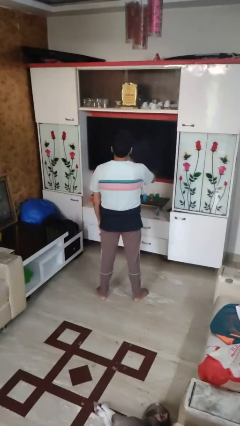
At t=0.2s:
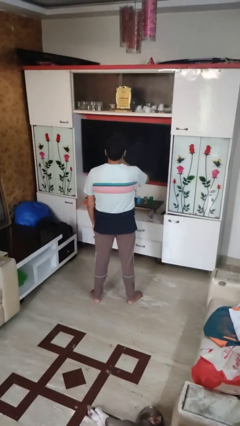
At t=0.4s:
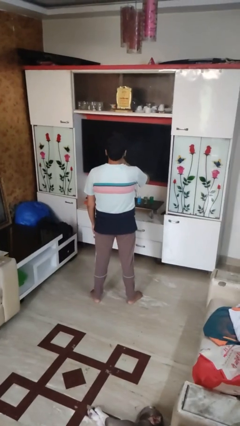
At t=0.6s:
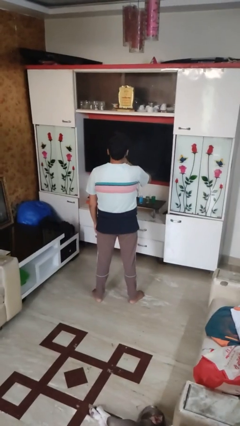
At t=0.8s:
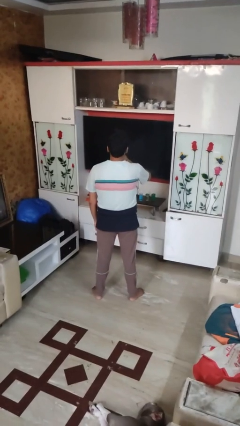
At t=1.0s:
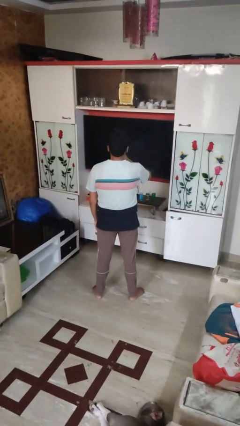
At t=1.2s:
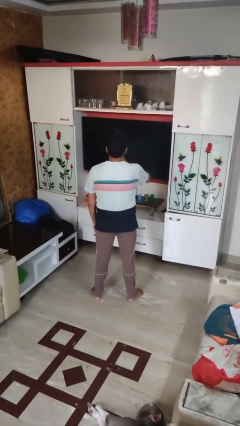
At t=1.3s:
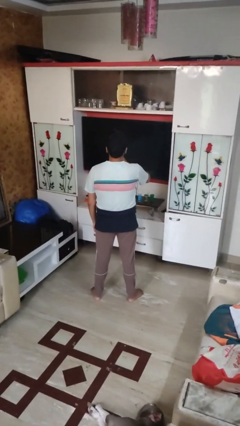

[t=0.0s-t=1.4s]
person gestures be quiet

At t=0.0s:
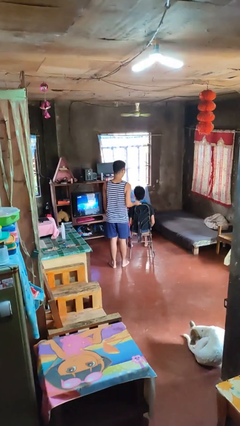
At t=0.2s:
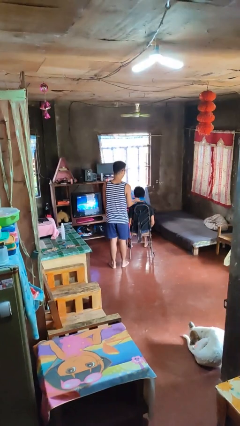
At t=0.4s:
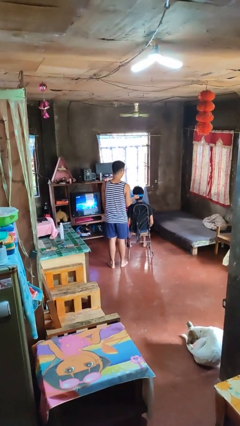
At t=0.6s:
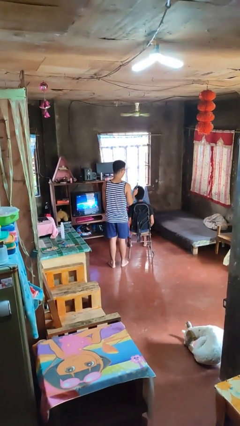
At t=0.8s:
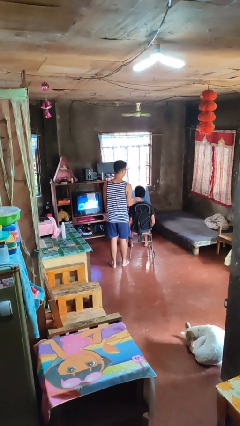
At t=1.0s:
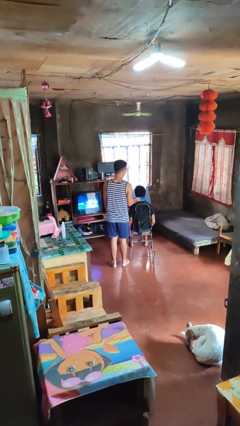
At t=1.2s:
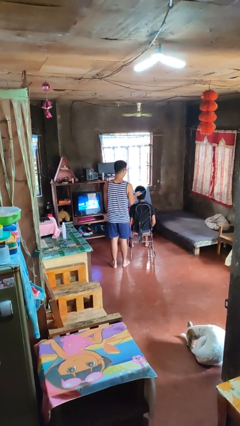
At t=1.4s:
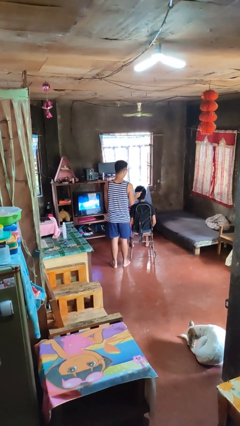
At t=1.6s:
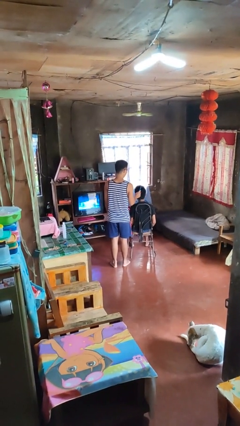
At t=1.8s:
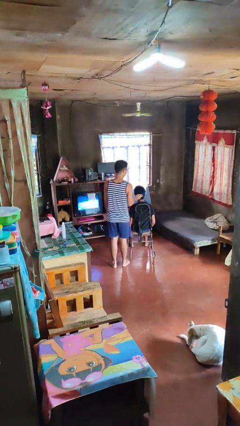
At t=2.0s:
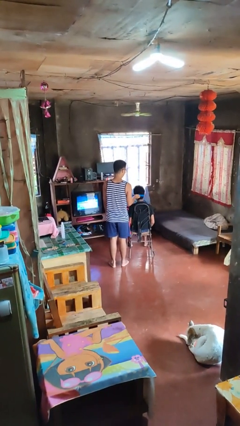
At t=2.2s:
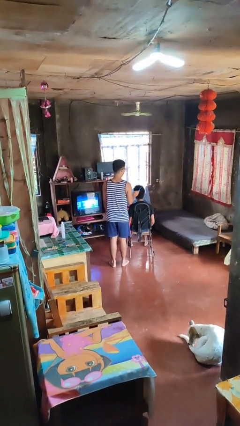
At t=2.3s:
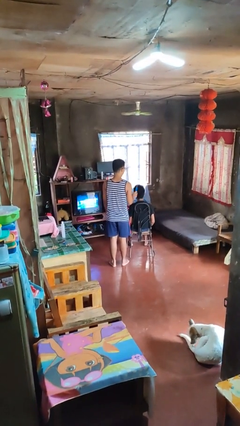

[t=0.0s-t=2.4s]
person brushes hair of person

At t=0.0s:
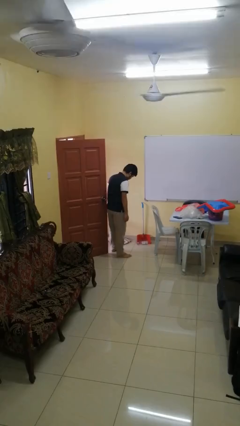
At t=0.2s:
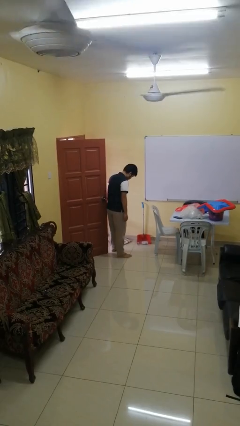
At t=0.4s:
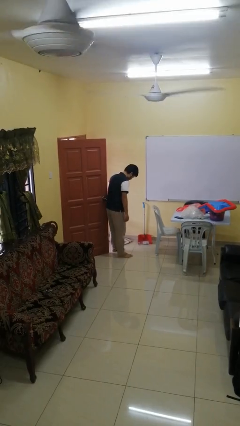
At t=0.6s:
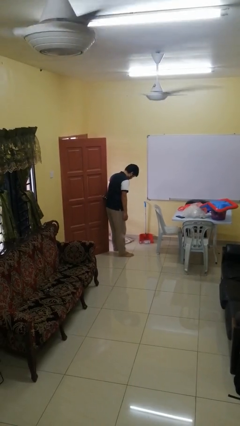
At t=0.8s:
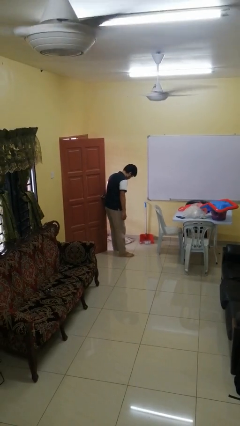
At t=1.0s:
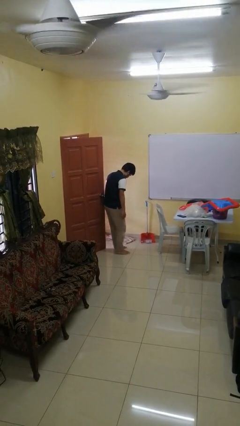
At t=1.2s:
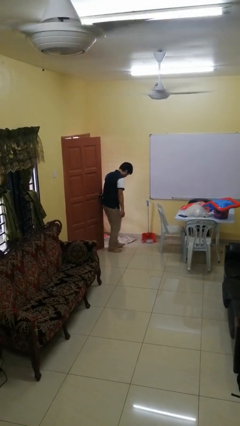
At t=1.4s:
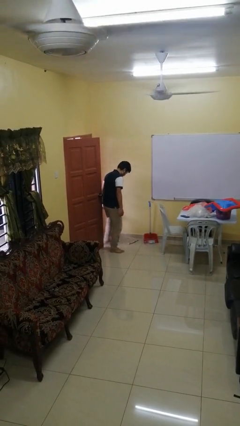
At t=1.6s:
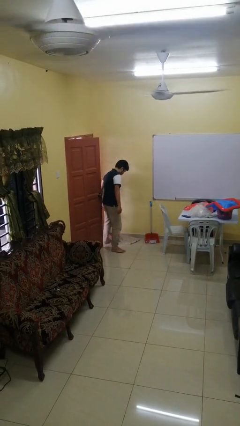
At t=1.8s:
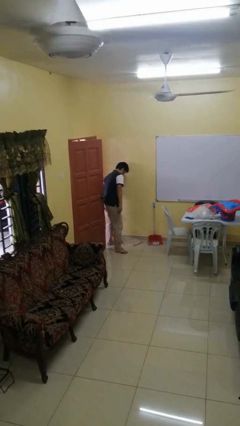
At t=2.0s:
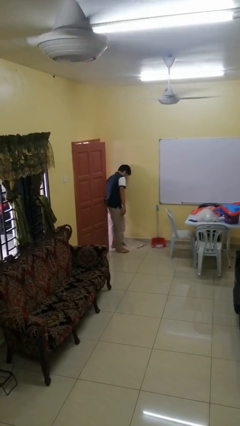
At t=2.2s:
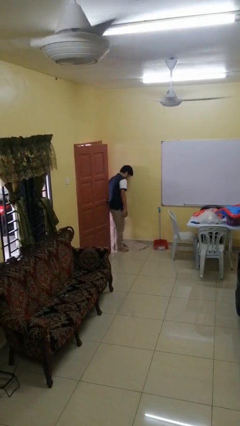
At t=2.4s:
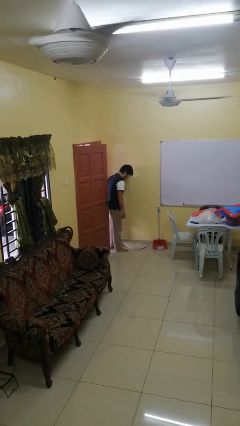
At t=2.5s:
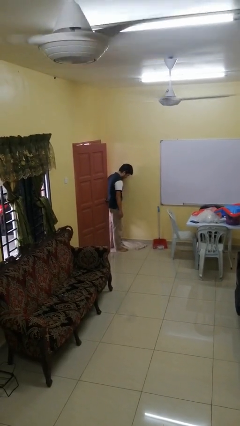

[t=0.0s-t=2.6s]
person closes door with hip

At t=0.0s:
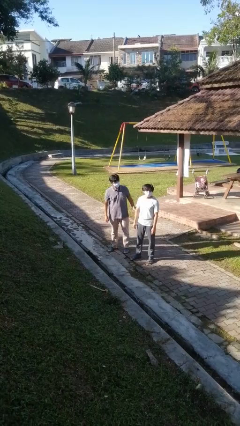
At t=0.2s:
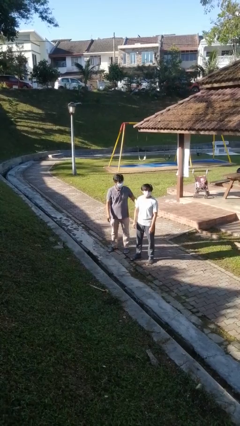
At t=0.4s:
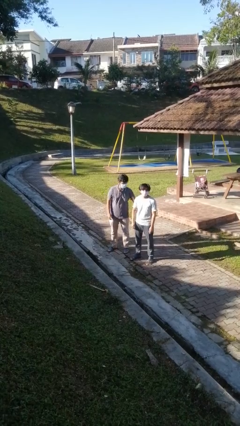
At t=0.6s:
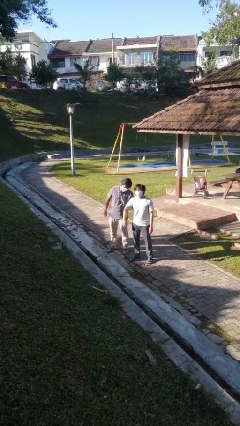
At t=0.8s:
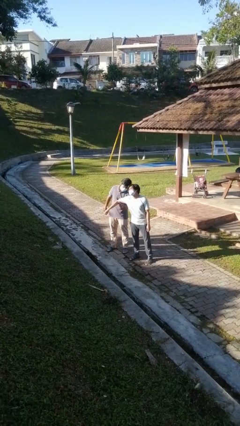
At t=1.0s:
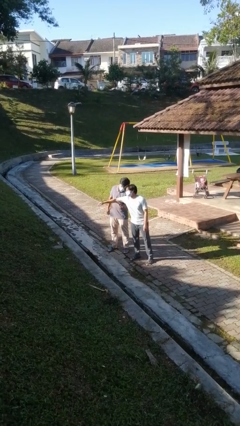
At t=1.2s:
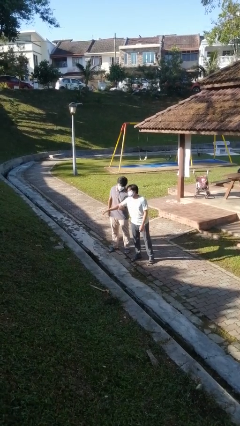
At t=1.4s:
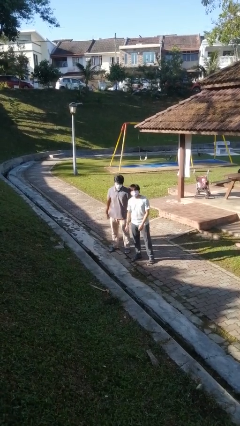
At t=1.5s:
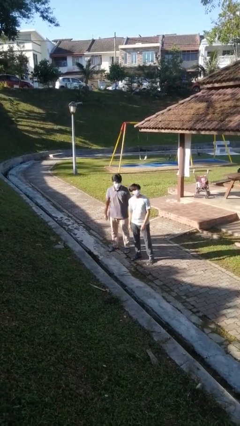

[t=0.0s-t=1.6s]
person grabs person by bicep

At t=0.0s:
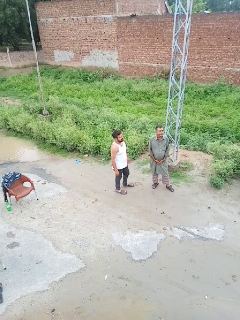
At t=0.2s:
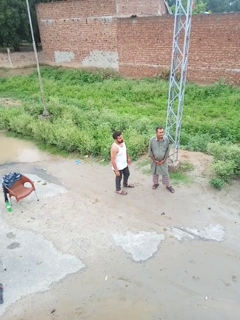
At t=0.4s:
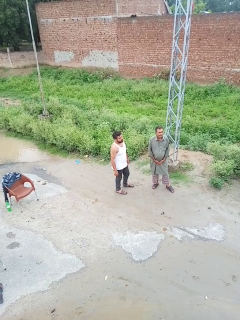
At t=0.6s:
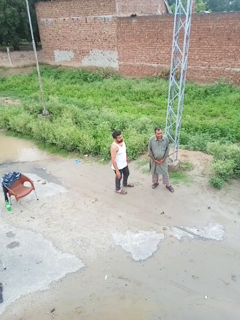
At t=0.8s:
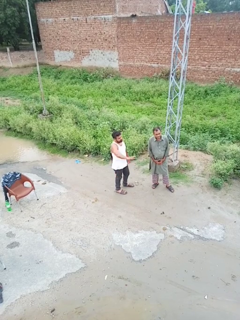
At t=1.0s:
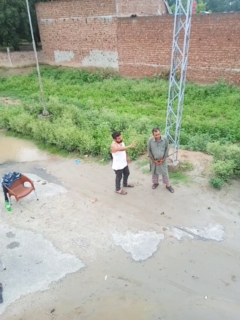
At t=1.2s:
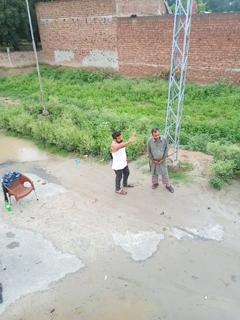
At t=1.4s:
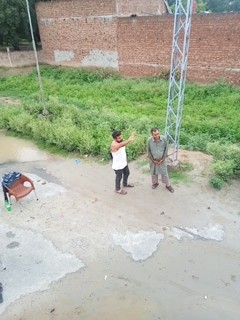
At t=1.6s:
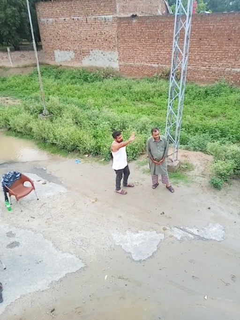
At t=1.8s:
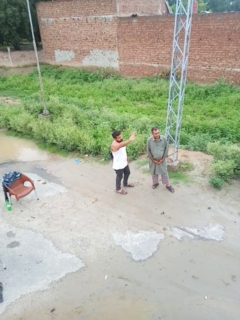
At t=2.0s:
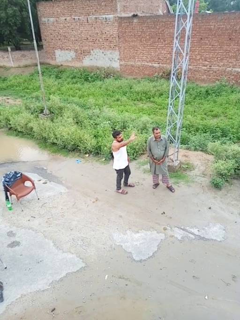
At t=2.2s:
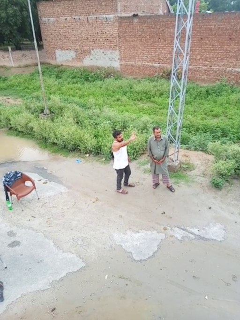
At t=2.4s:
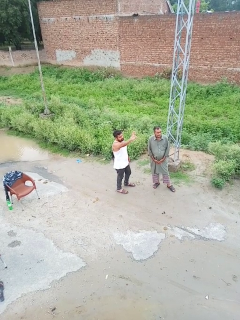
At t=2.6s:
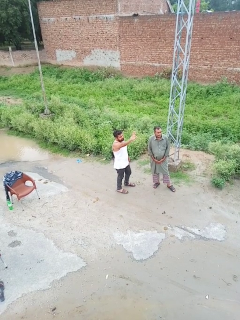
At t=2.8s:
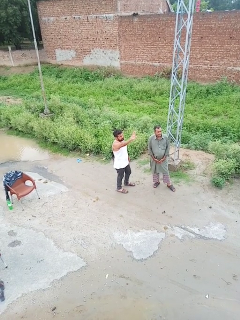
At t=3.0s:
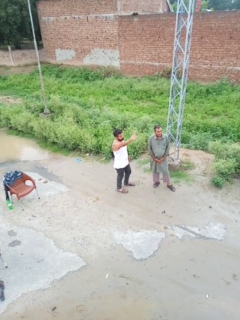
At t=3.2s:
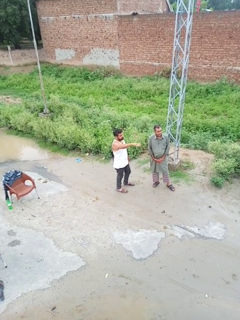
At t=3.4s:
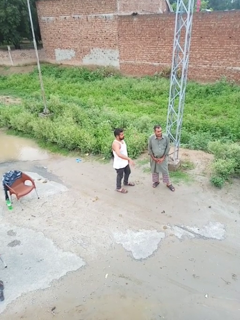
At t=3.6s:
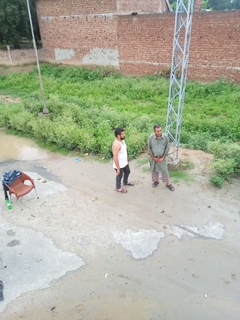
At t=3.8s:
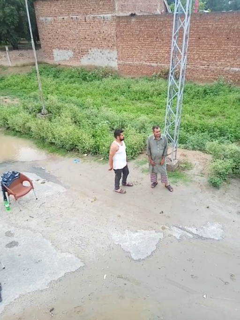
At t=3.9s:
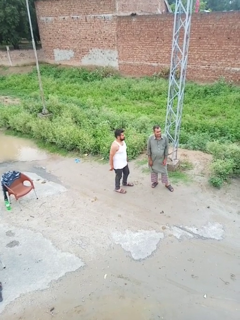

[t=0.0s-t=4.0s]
person waves at person

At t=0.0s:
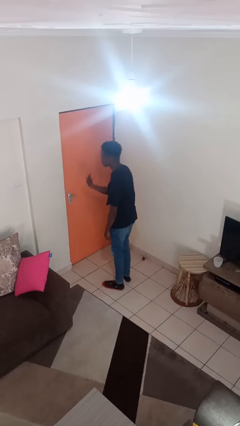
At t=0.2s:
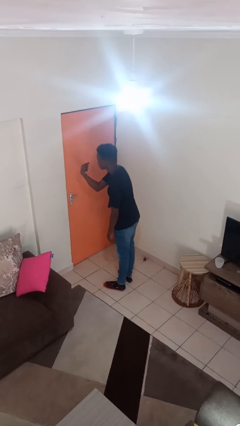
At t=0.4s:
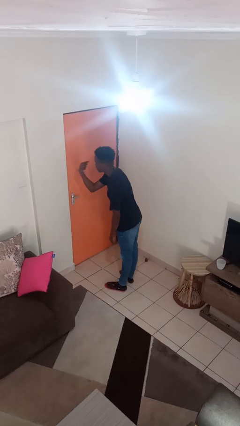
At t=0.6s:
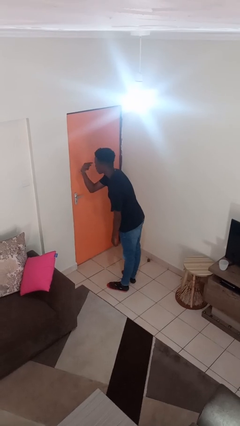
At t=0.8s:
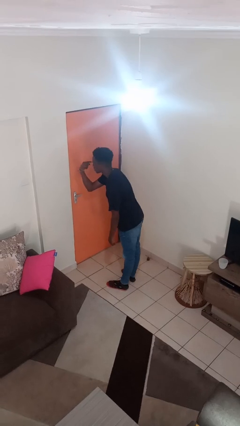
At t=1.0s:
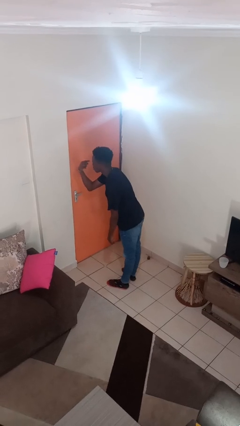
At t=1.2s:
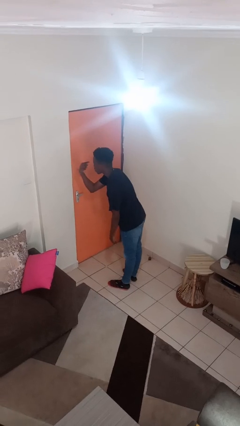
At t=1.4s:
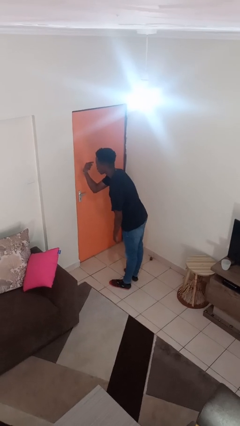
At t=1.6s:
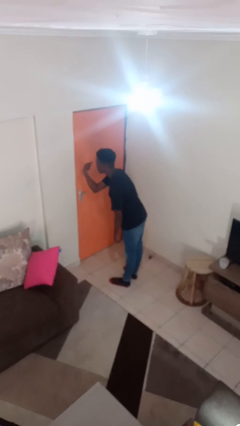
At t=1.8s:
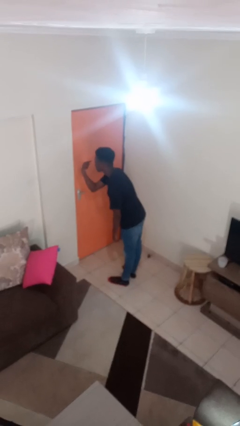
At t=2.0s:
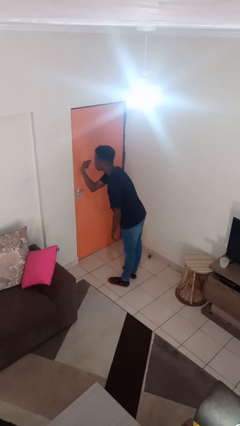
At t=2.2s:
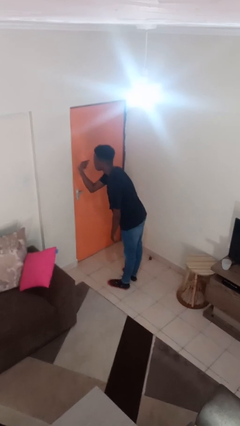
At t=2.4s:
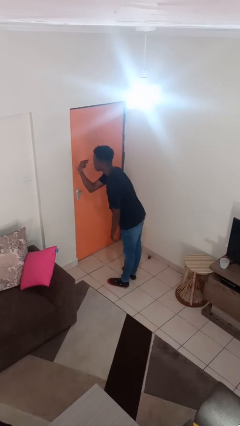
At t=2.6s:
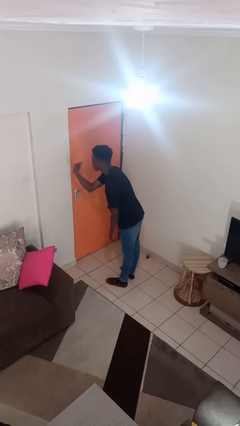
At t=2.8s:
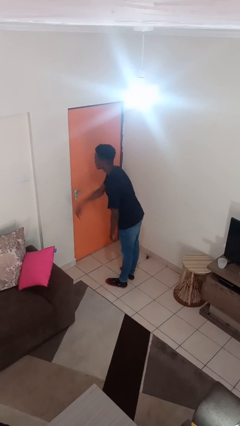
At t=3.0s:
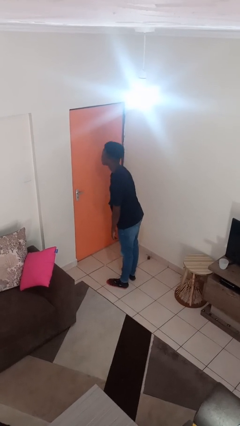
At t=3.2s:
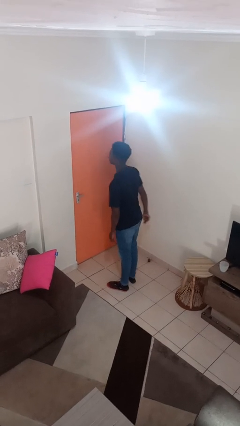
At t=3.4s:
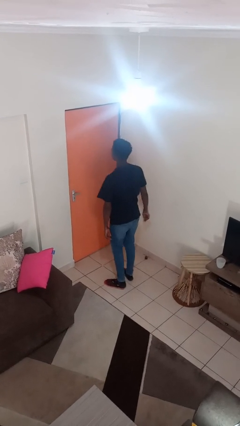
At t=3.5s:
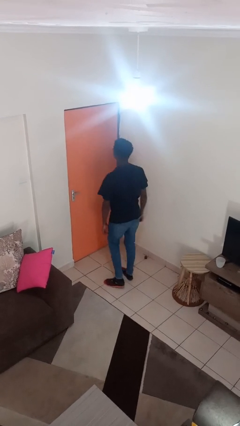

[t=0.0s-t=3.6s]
person gestures watch closely

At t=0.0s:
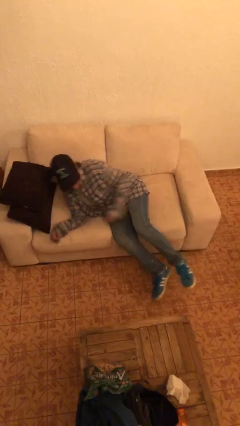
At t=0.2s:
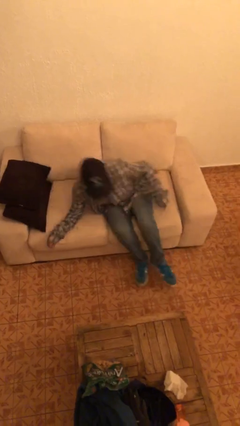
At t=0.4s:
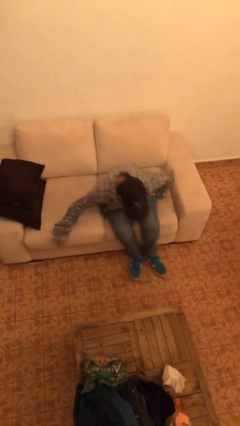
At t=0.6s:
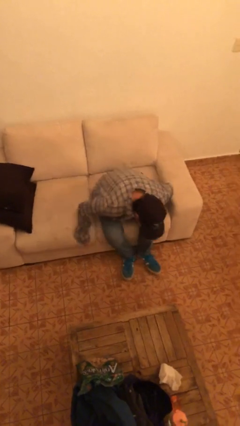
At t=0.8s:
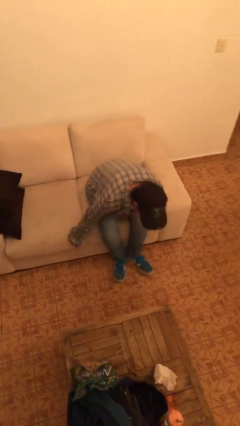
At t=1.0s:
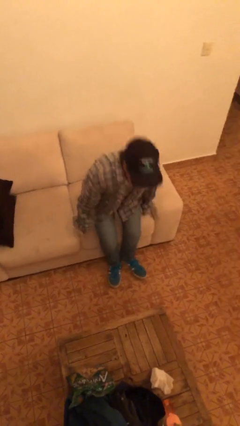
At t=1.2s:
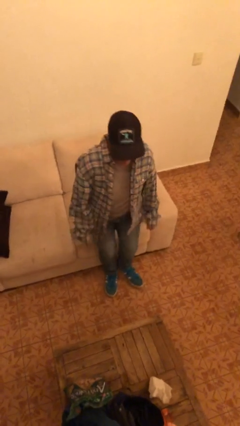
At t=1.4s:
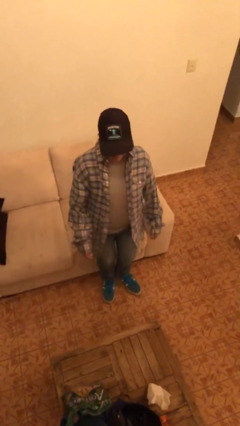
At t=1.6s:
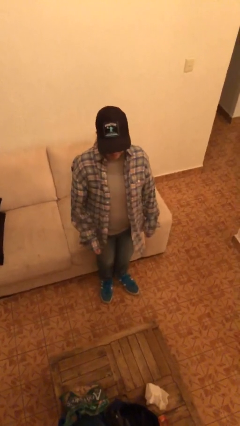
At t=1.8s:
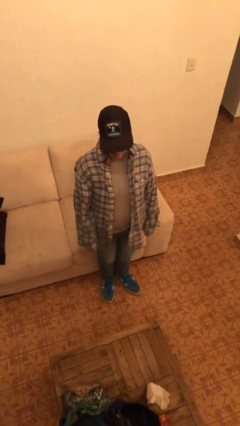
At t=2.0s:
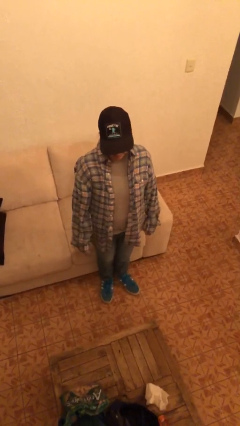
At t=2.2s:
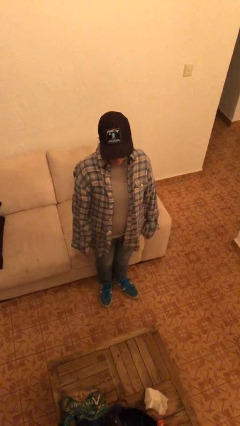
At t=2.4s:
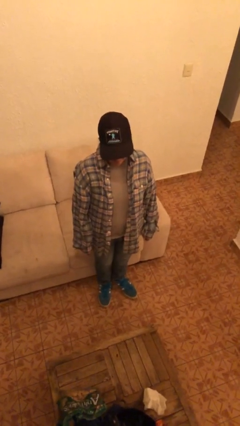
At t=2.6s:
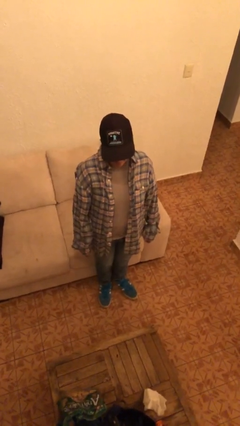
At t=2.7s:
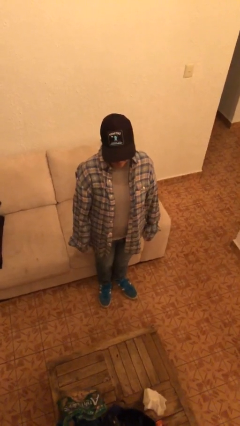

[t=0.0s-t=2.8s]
person stands up
